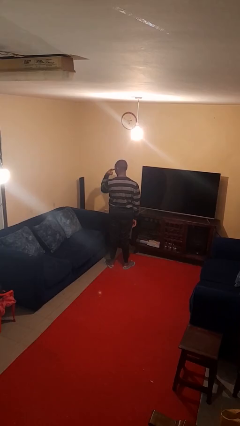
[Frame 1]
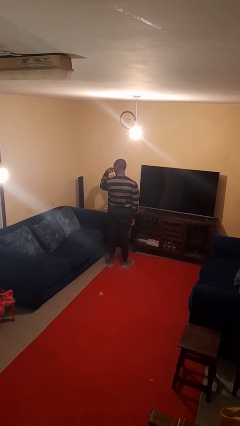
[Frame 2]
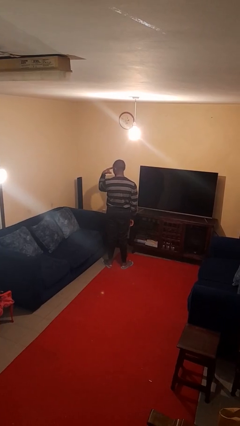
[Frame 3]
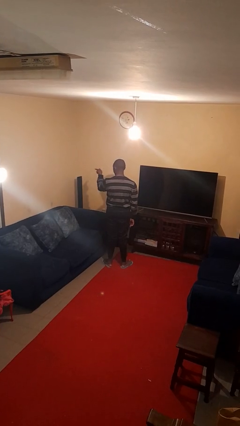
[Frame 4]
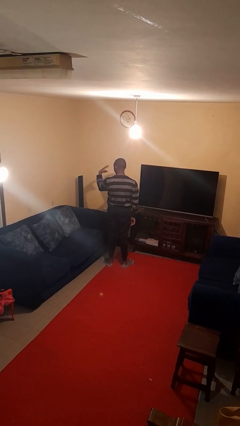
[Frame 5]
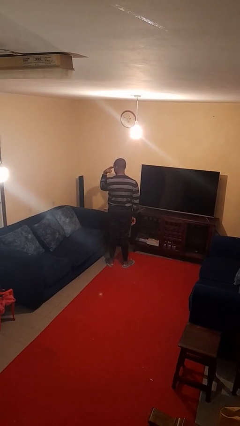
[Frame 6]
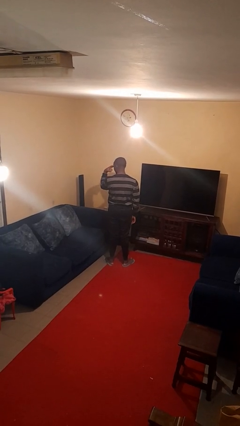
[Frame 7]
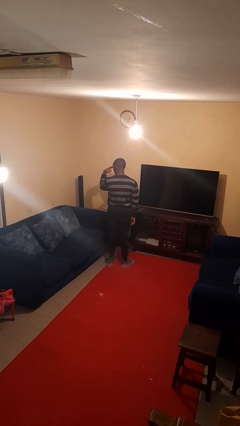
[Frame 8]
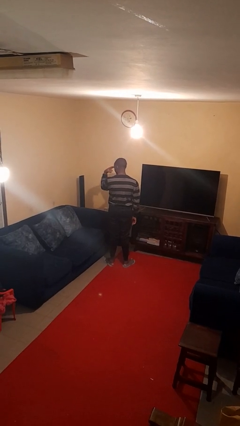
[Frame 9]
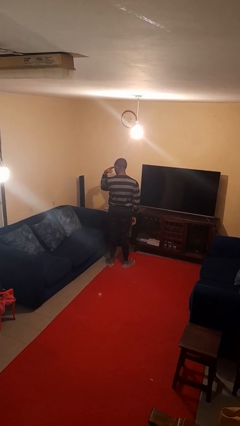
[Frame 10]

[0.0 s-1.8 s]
person gestures watch closely

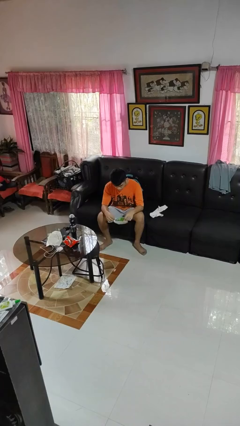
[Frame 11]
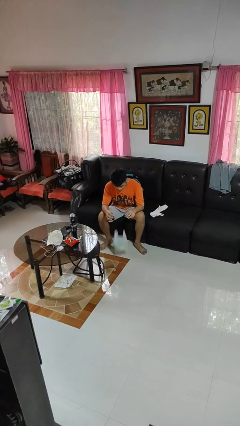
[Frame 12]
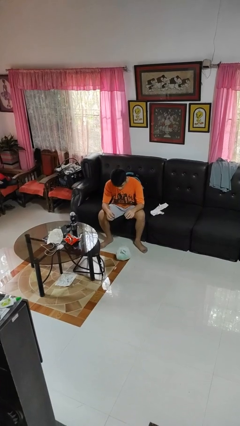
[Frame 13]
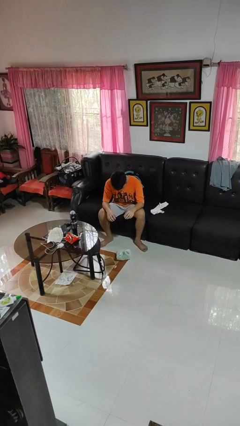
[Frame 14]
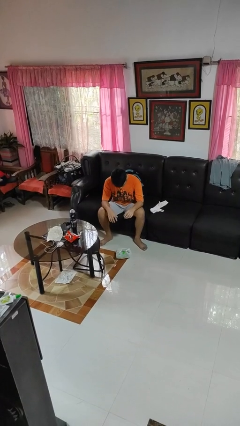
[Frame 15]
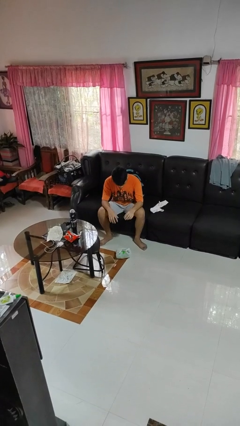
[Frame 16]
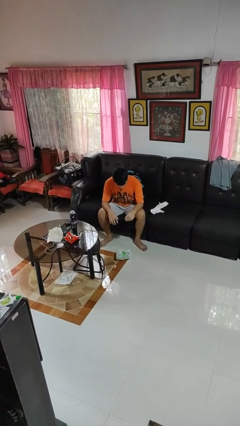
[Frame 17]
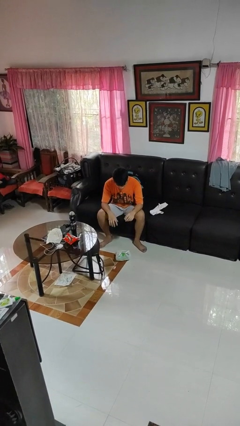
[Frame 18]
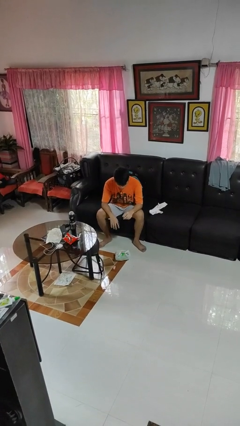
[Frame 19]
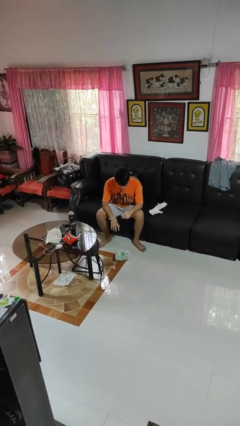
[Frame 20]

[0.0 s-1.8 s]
person drops object

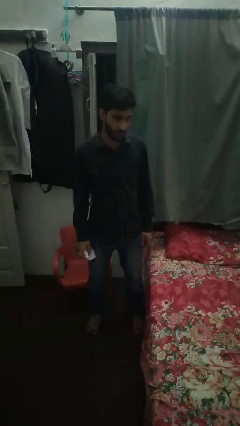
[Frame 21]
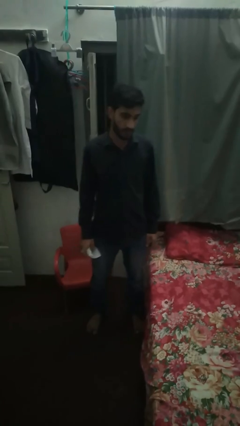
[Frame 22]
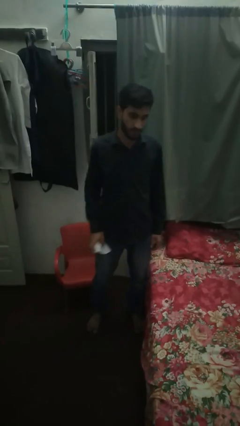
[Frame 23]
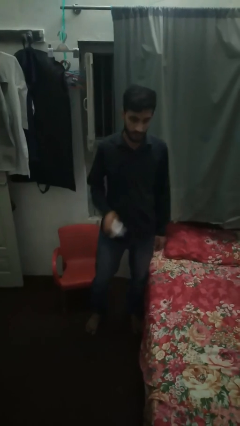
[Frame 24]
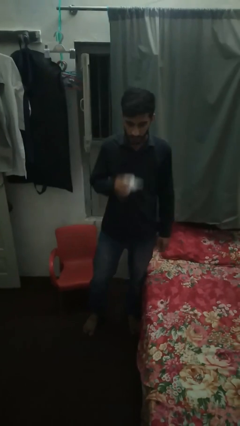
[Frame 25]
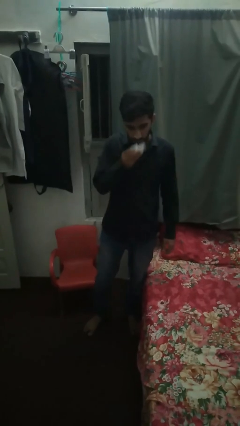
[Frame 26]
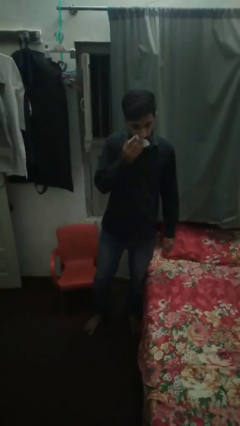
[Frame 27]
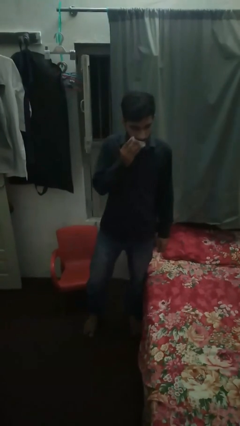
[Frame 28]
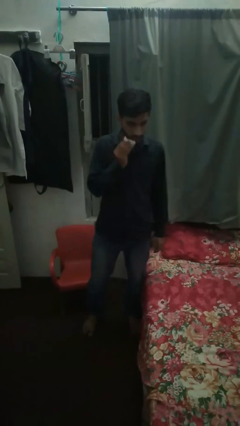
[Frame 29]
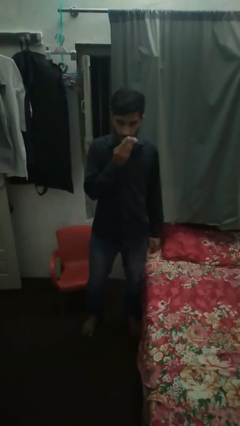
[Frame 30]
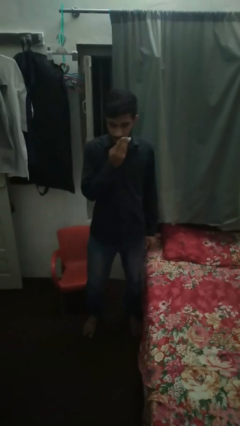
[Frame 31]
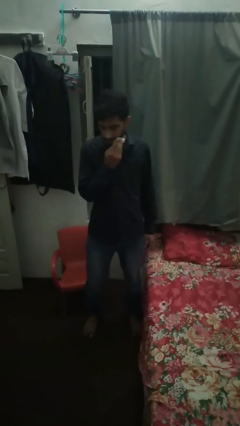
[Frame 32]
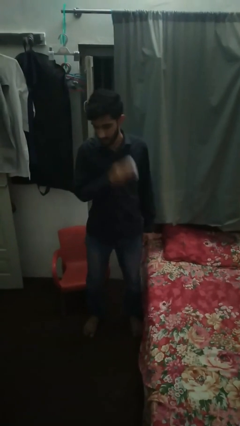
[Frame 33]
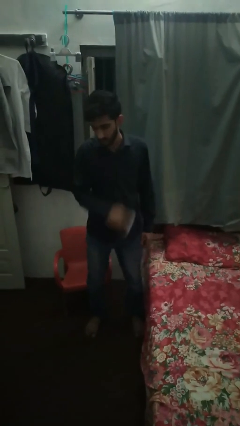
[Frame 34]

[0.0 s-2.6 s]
person wipes mouth with napkin

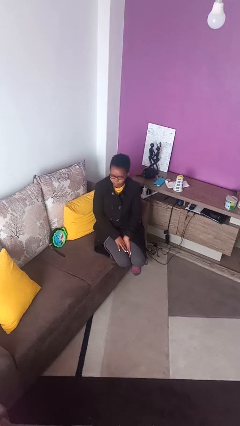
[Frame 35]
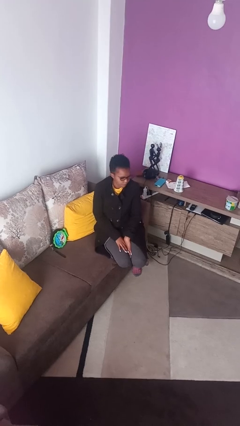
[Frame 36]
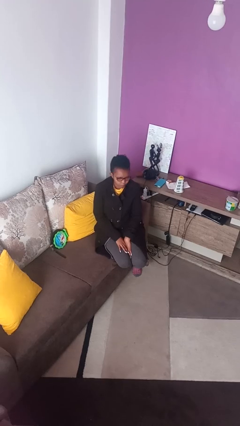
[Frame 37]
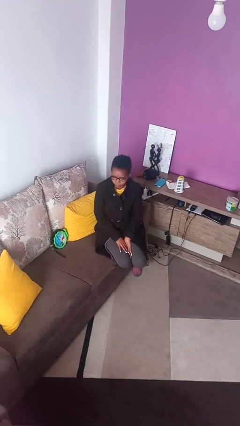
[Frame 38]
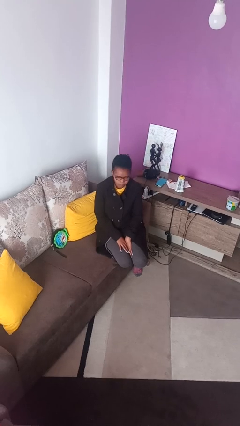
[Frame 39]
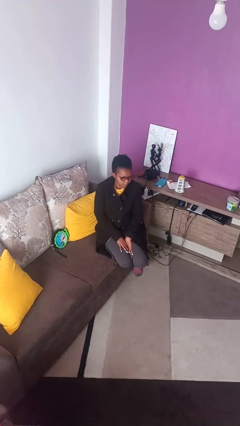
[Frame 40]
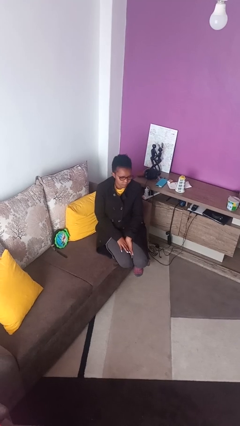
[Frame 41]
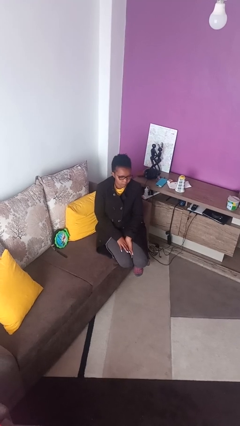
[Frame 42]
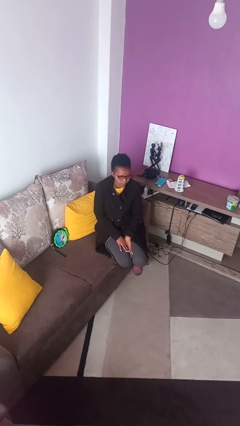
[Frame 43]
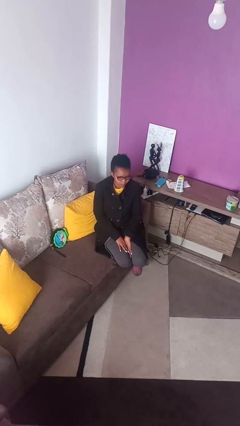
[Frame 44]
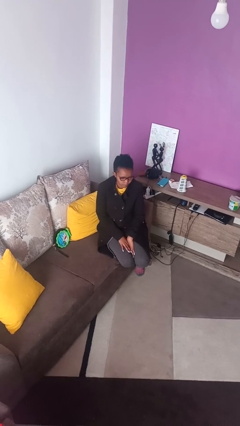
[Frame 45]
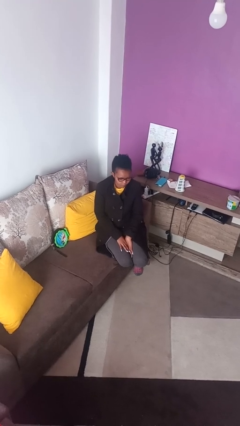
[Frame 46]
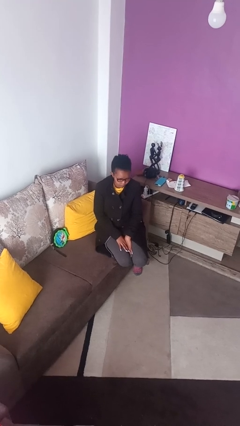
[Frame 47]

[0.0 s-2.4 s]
person shakes head

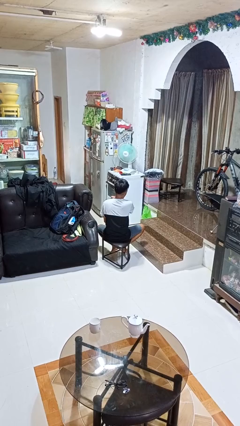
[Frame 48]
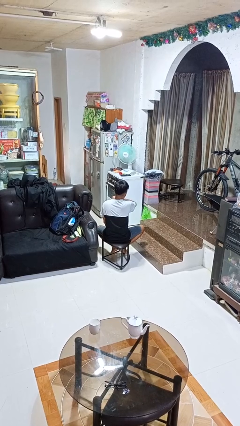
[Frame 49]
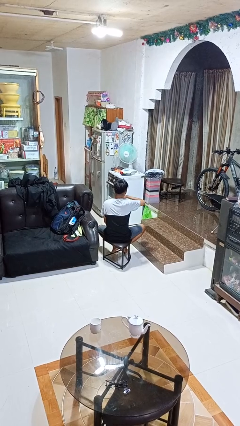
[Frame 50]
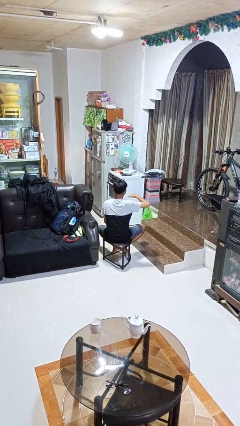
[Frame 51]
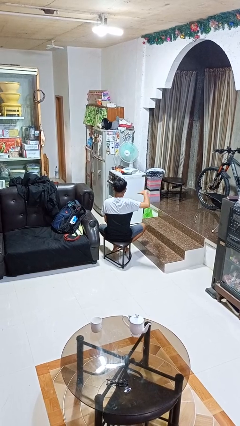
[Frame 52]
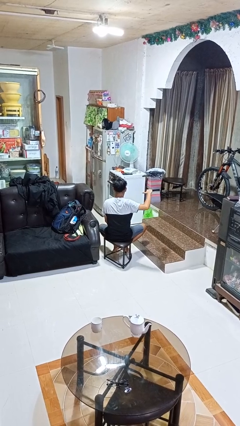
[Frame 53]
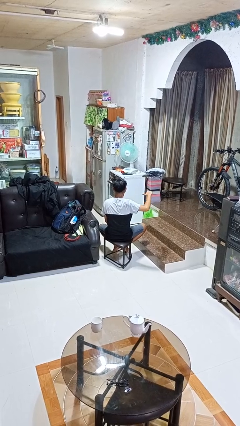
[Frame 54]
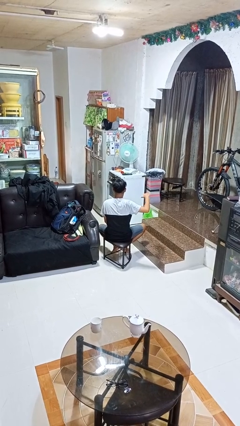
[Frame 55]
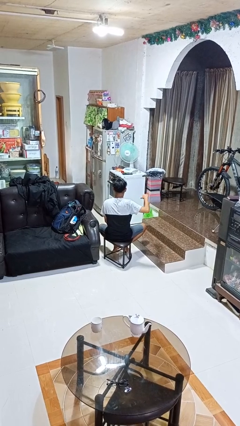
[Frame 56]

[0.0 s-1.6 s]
person gestures cut

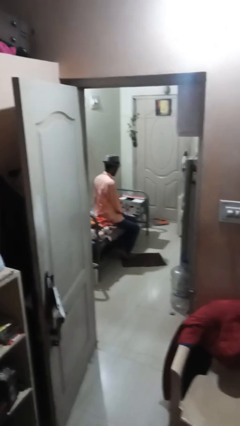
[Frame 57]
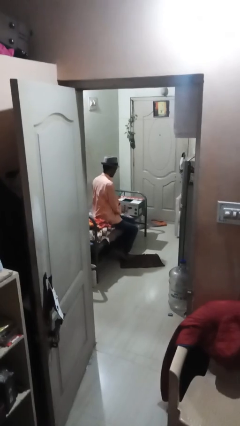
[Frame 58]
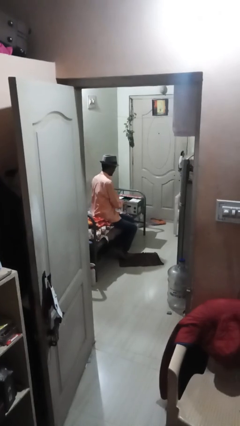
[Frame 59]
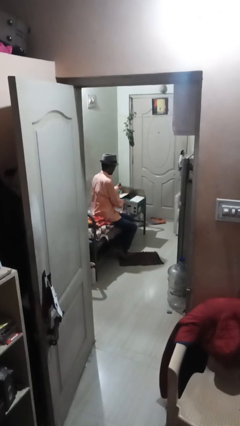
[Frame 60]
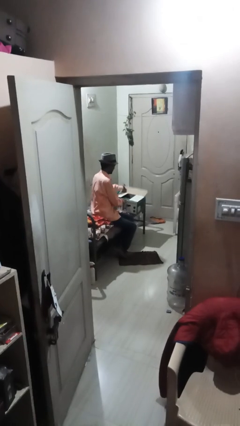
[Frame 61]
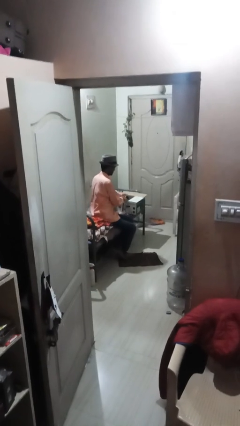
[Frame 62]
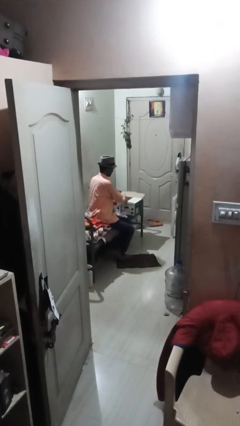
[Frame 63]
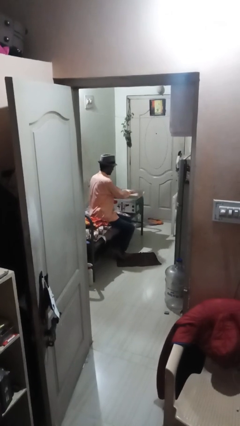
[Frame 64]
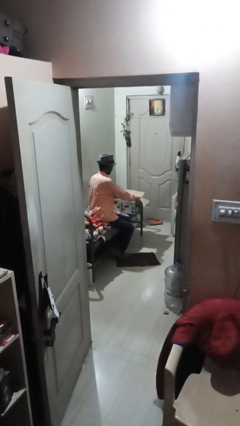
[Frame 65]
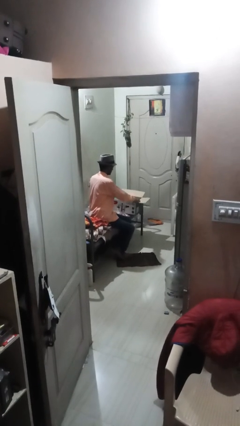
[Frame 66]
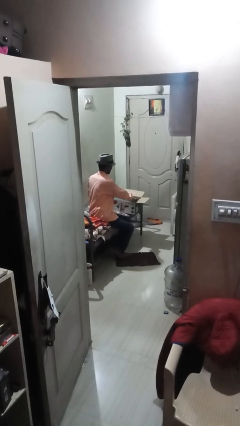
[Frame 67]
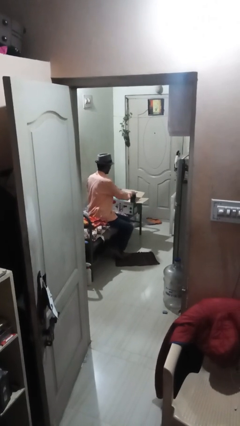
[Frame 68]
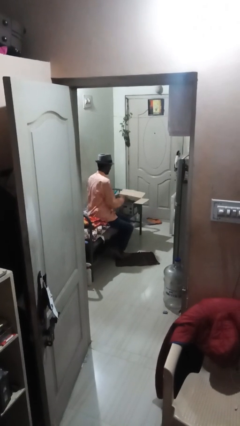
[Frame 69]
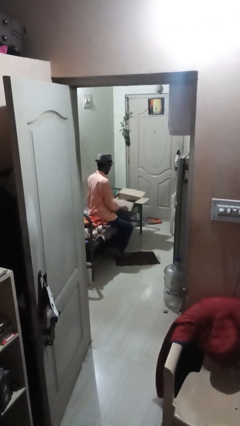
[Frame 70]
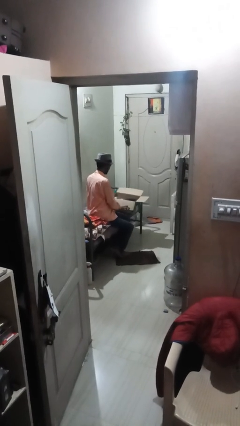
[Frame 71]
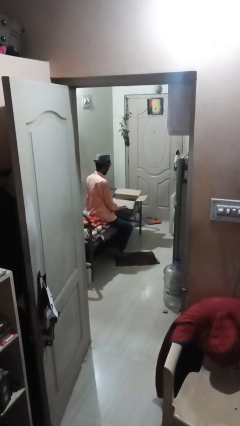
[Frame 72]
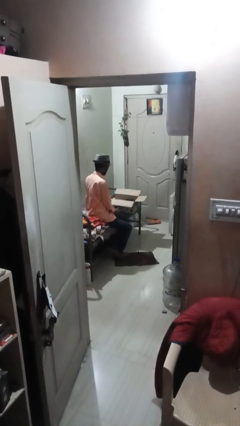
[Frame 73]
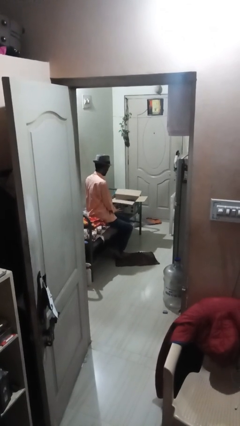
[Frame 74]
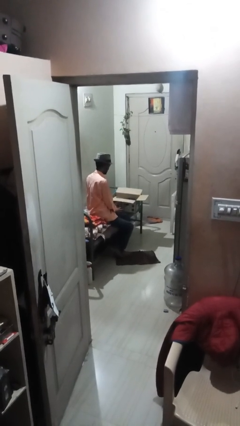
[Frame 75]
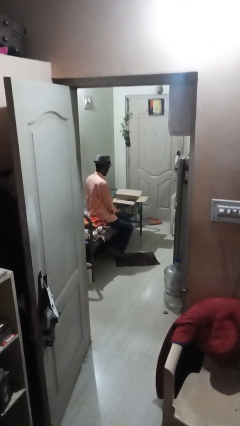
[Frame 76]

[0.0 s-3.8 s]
person opens box

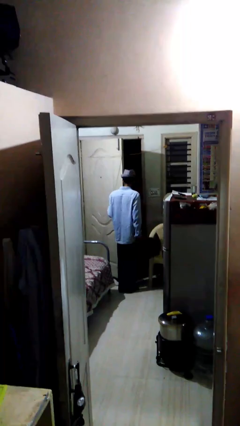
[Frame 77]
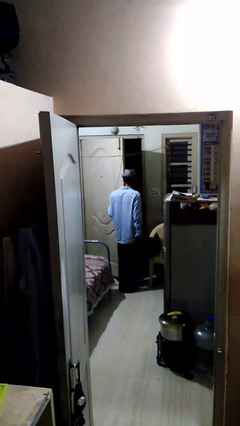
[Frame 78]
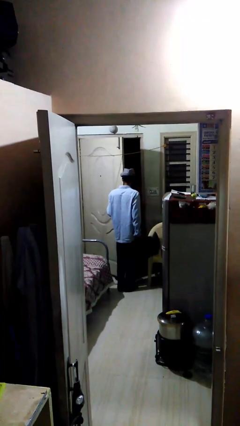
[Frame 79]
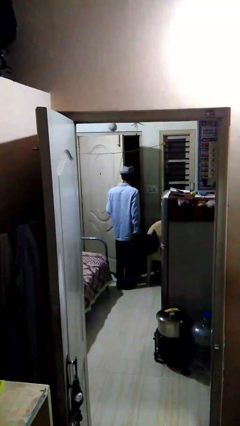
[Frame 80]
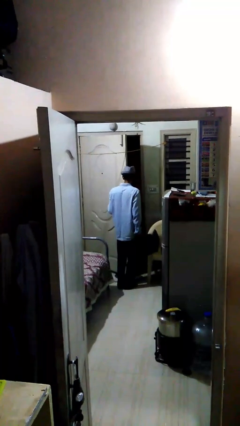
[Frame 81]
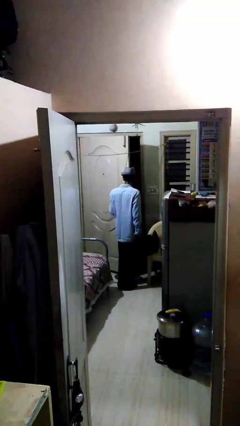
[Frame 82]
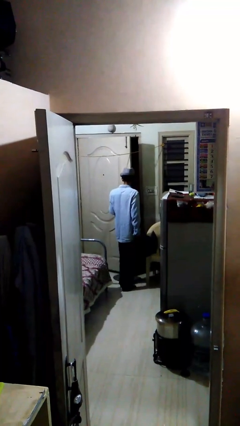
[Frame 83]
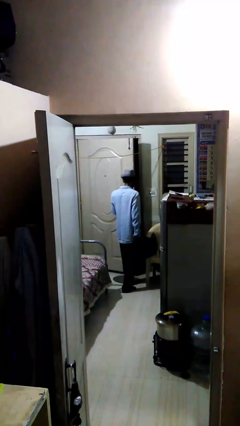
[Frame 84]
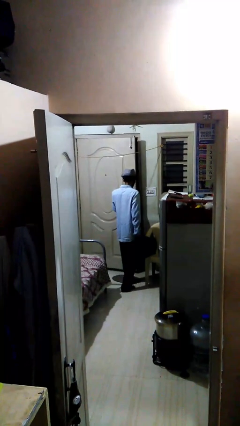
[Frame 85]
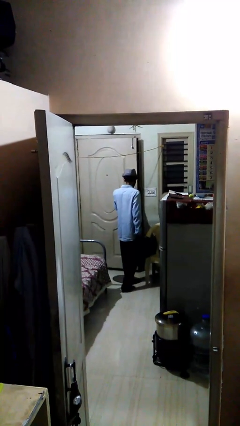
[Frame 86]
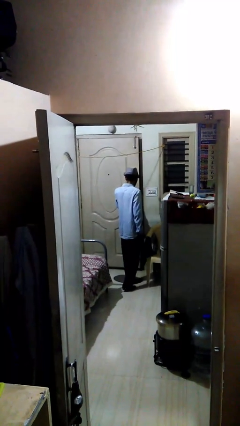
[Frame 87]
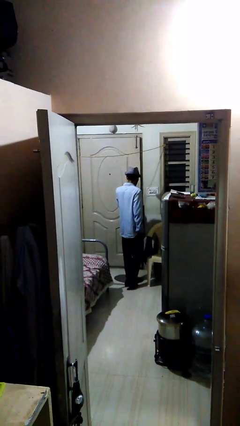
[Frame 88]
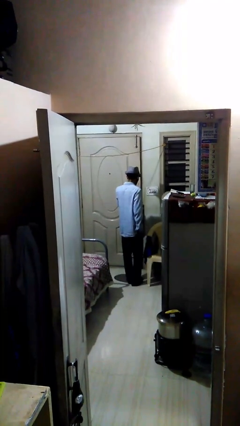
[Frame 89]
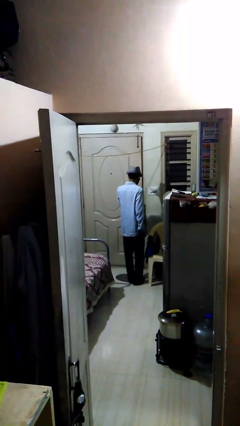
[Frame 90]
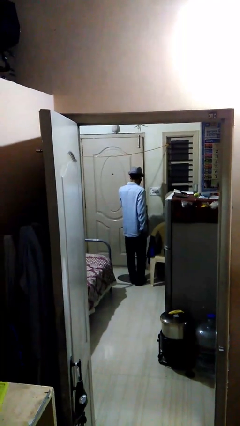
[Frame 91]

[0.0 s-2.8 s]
person closes facility door

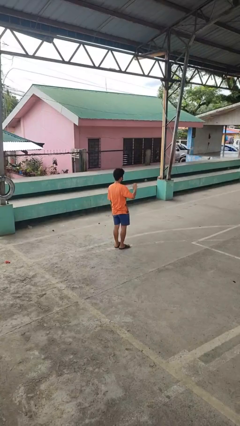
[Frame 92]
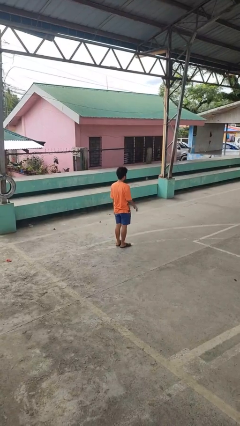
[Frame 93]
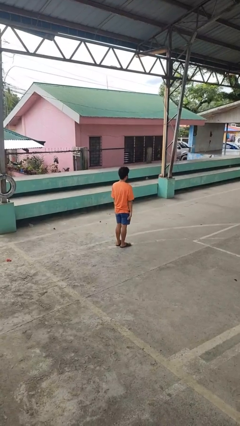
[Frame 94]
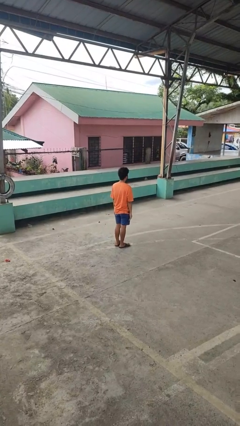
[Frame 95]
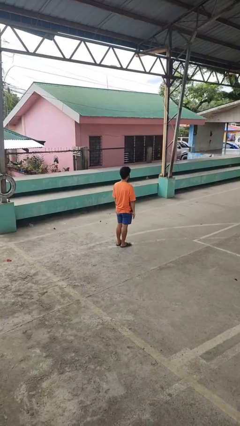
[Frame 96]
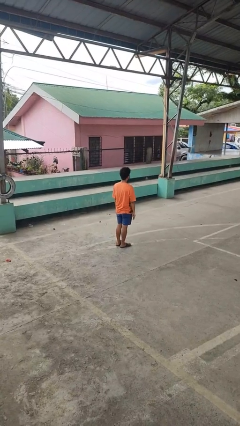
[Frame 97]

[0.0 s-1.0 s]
person gestures lower hand
